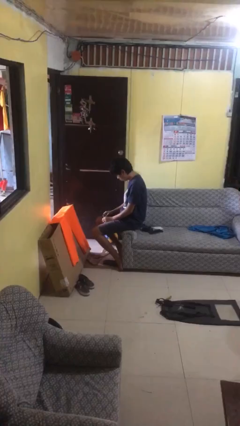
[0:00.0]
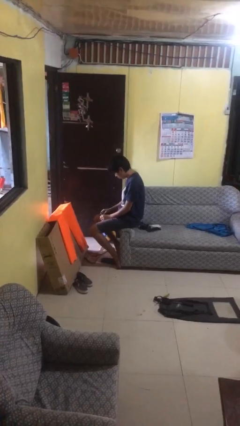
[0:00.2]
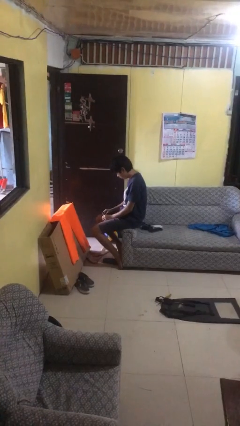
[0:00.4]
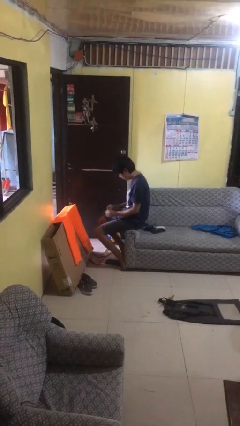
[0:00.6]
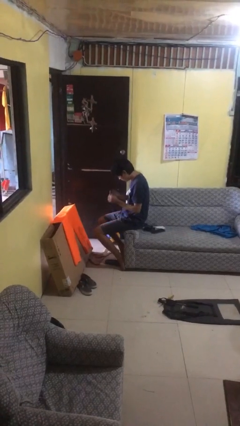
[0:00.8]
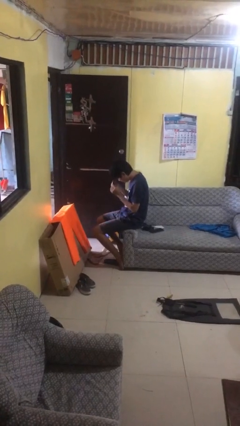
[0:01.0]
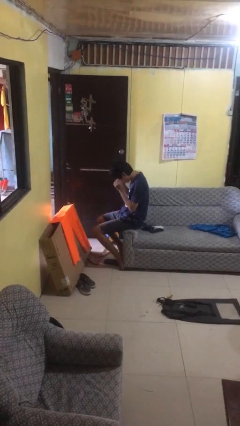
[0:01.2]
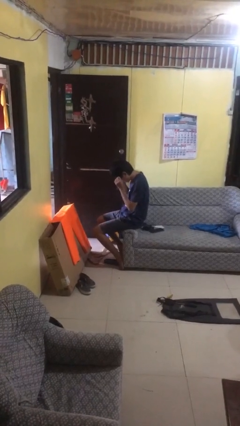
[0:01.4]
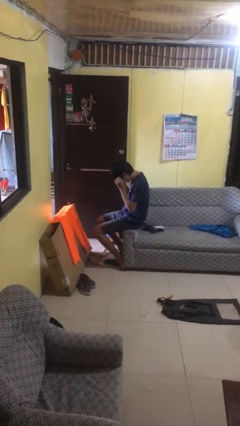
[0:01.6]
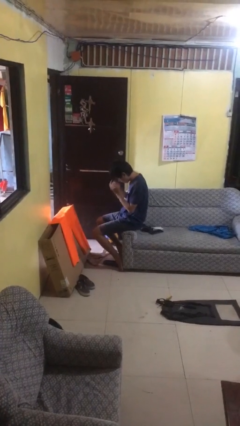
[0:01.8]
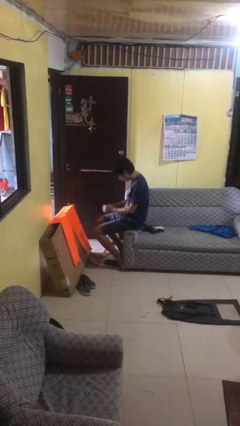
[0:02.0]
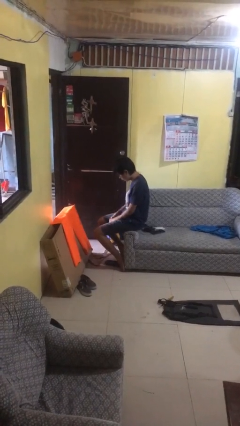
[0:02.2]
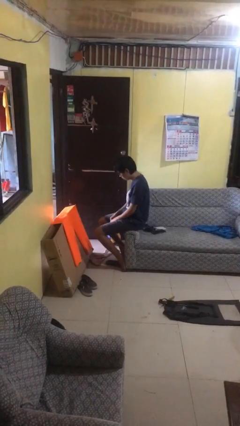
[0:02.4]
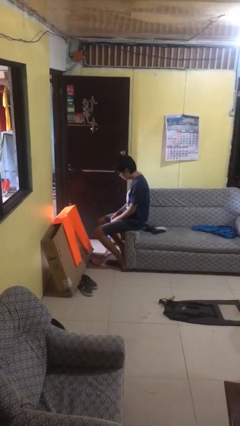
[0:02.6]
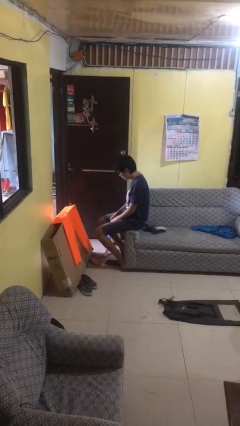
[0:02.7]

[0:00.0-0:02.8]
person puts on glasses

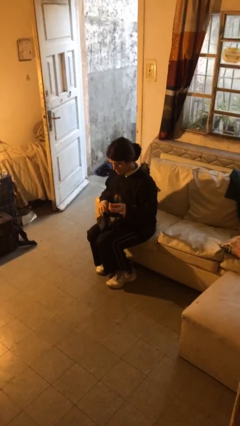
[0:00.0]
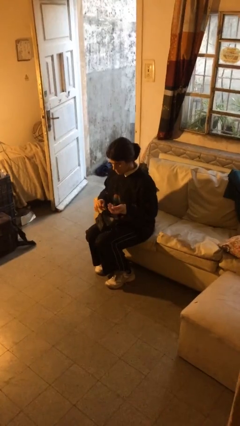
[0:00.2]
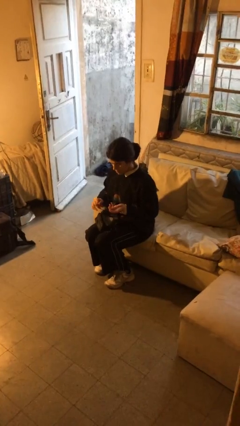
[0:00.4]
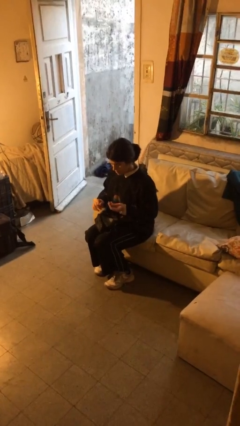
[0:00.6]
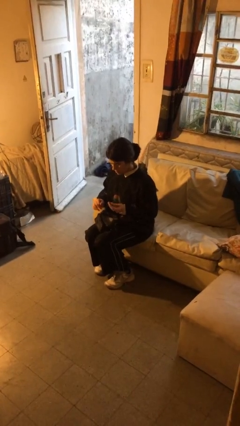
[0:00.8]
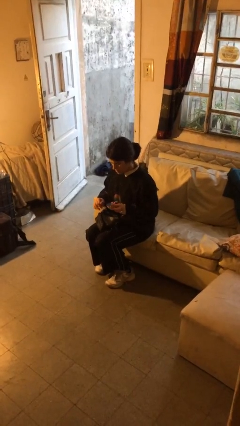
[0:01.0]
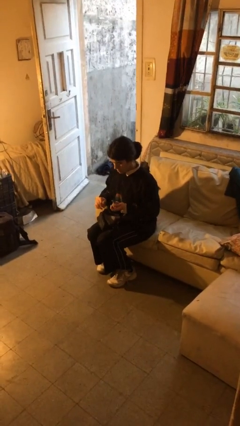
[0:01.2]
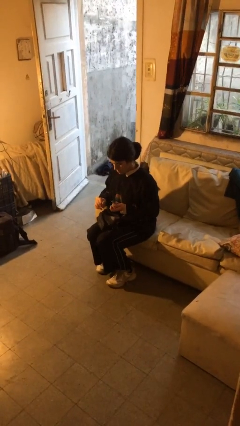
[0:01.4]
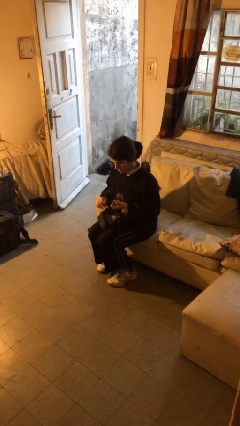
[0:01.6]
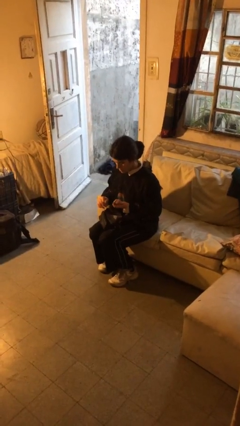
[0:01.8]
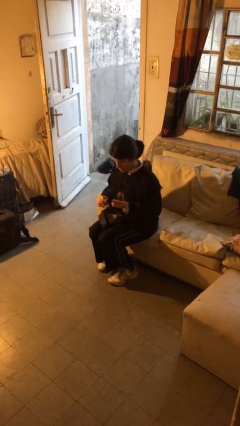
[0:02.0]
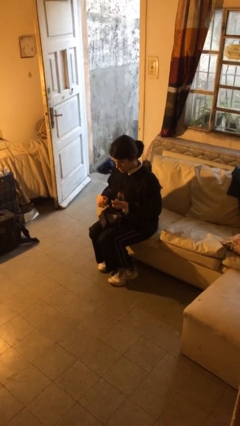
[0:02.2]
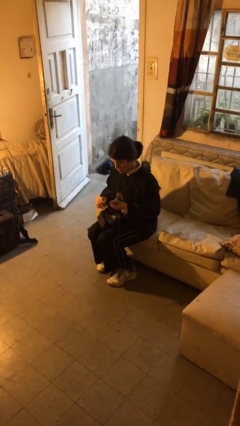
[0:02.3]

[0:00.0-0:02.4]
person takes object from purse

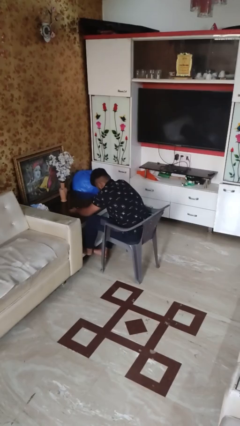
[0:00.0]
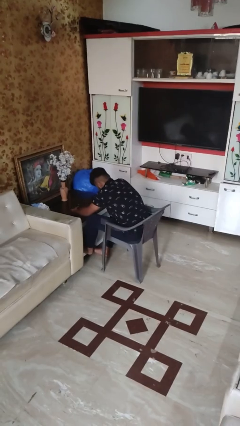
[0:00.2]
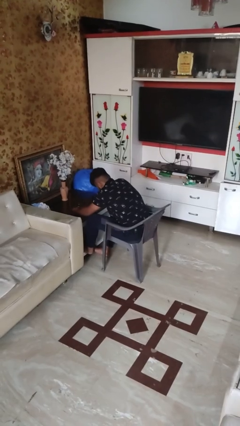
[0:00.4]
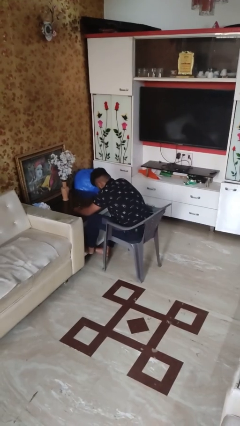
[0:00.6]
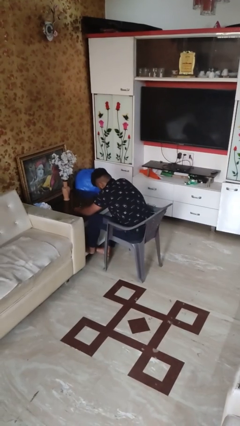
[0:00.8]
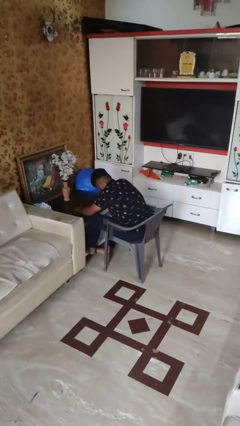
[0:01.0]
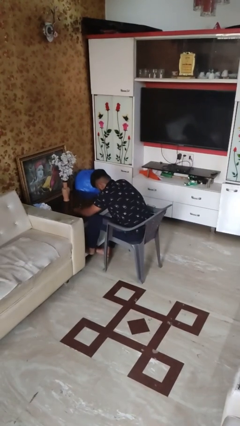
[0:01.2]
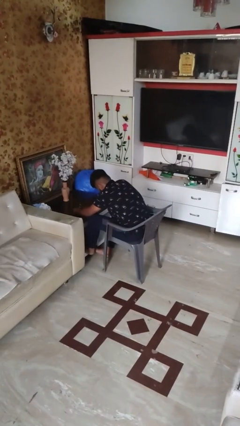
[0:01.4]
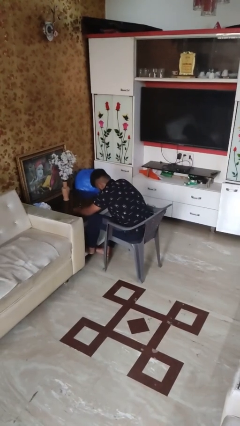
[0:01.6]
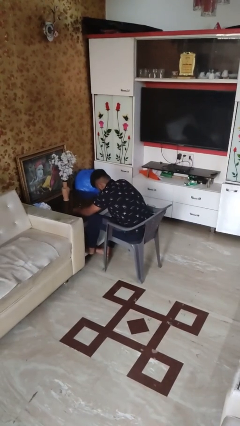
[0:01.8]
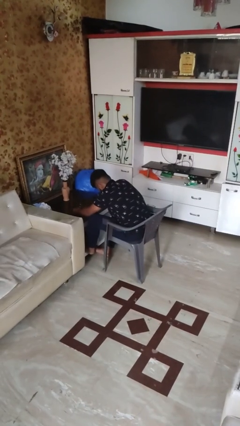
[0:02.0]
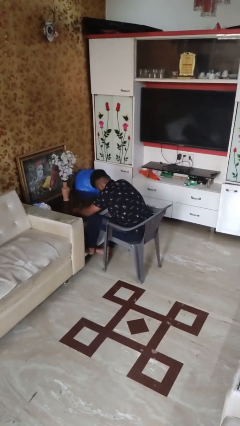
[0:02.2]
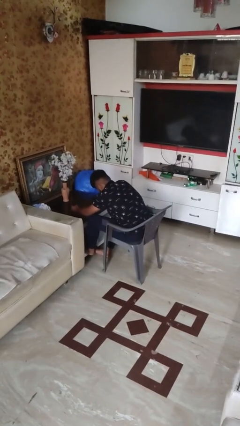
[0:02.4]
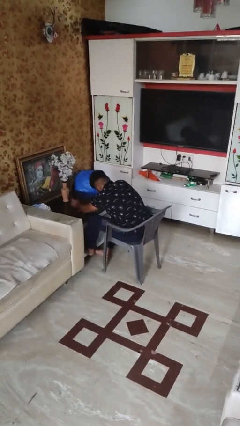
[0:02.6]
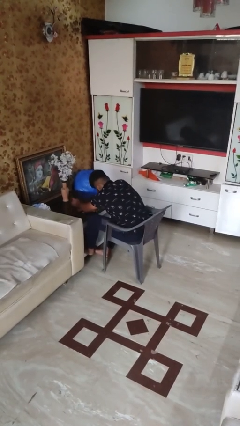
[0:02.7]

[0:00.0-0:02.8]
person paints fingernails

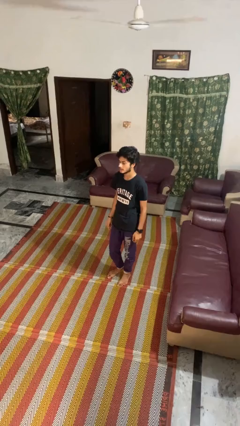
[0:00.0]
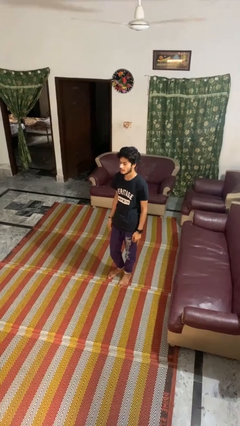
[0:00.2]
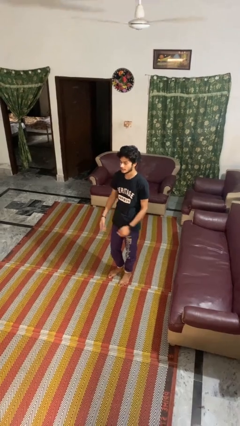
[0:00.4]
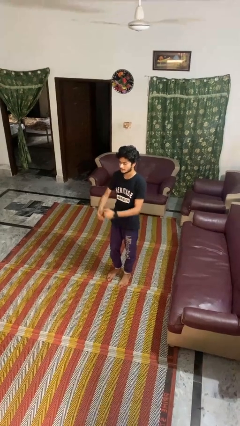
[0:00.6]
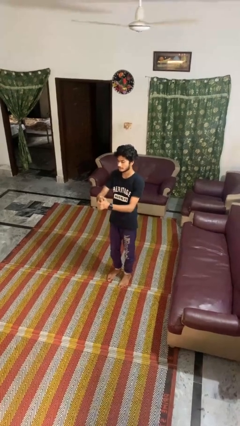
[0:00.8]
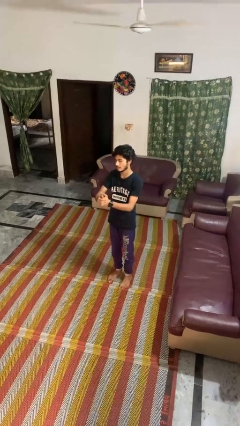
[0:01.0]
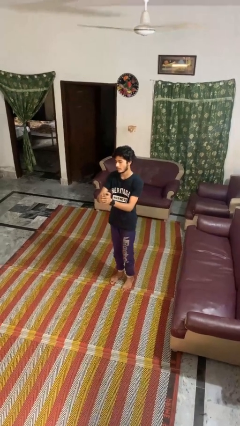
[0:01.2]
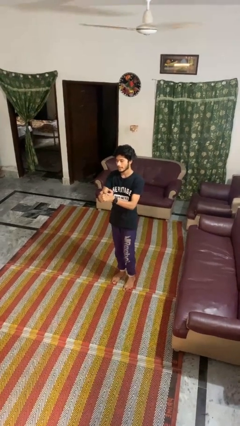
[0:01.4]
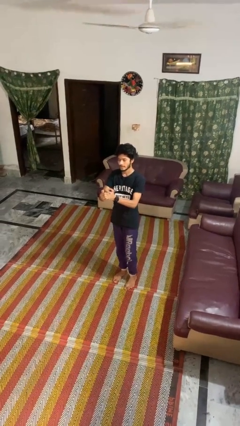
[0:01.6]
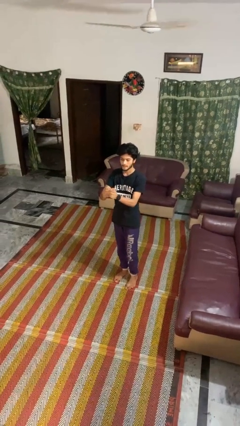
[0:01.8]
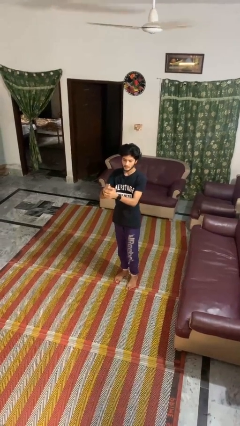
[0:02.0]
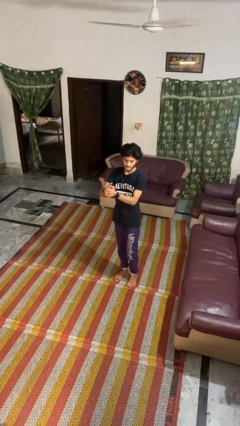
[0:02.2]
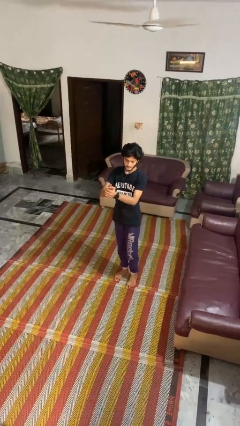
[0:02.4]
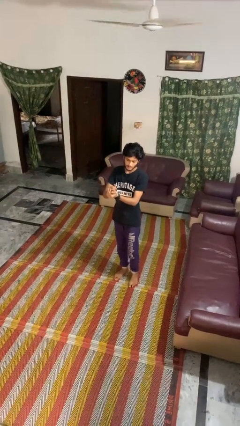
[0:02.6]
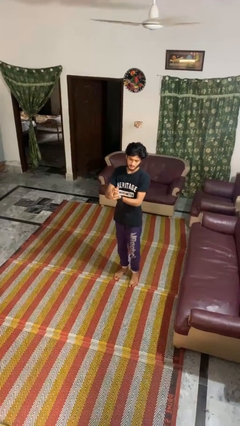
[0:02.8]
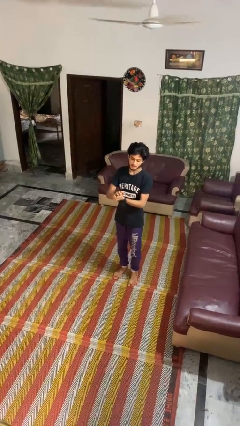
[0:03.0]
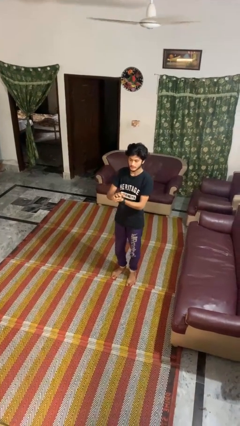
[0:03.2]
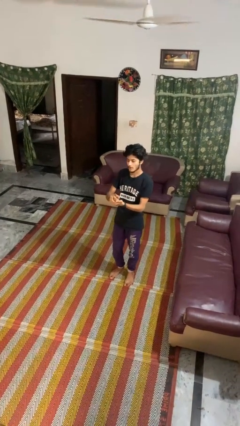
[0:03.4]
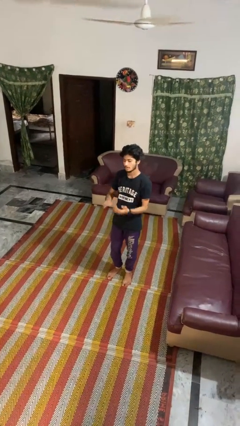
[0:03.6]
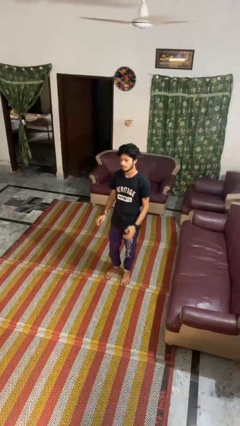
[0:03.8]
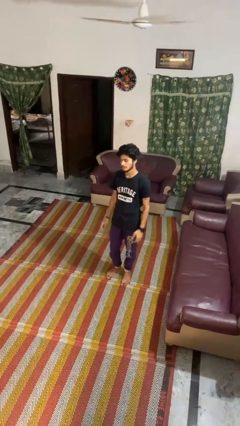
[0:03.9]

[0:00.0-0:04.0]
person cracks knuckles

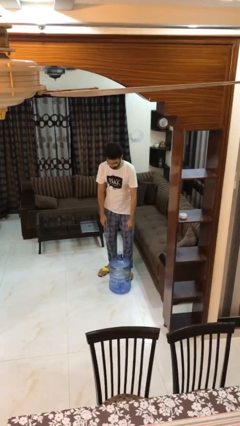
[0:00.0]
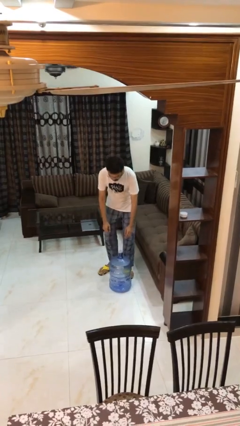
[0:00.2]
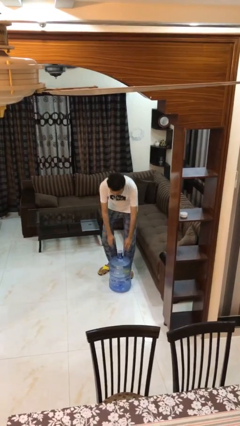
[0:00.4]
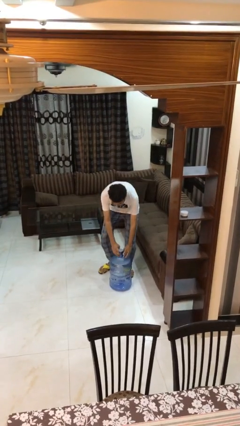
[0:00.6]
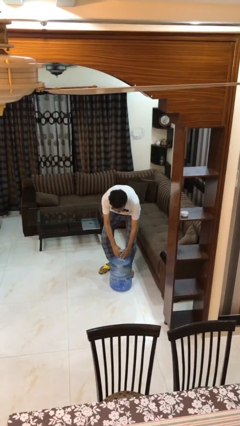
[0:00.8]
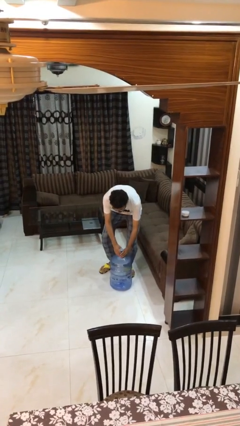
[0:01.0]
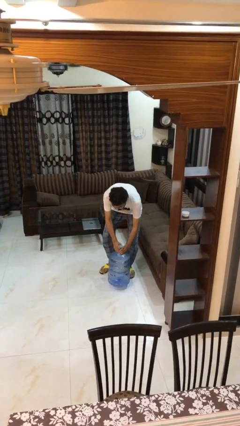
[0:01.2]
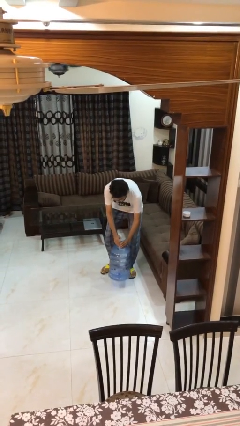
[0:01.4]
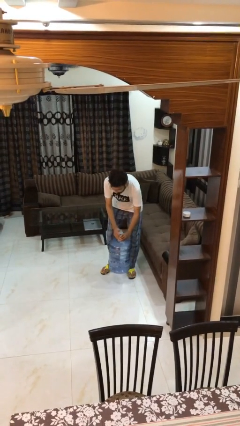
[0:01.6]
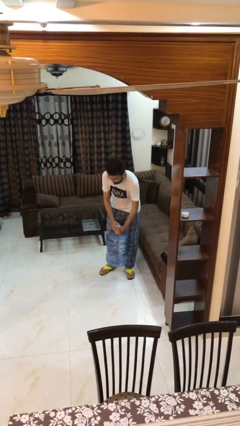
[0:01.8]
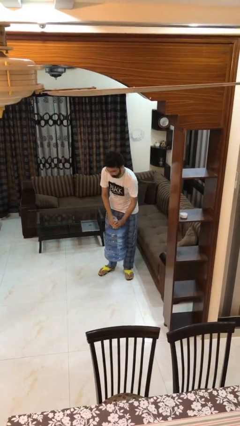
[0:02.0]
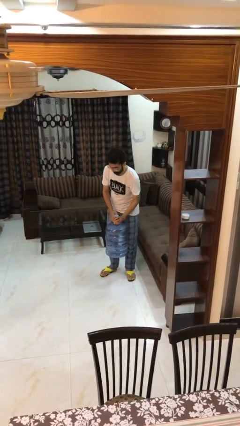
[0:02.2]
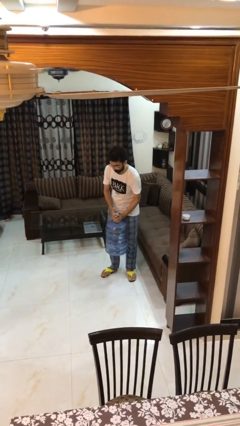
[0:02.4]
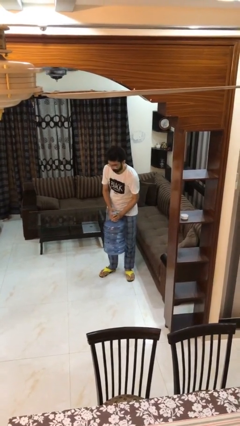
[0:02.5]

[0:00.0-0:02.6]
person picks up object from floor

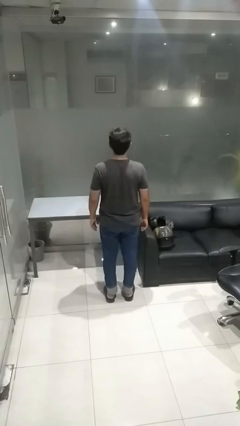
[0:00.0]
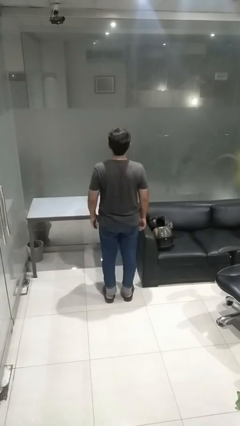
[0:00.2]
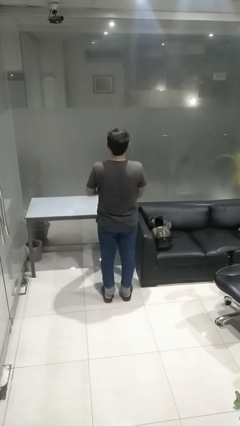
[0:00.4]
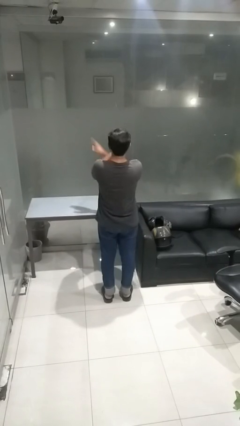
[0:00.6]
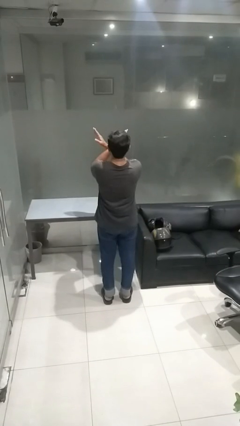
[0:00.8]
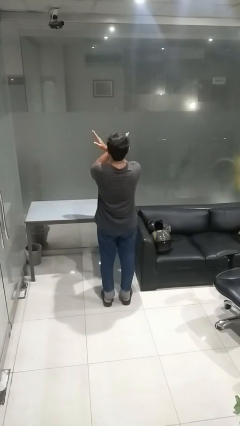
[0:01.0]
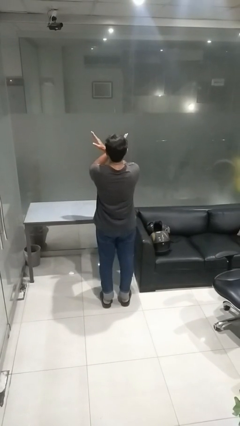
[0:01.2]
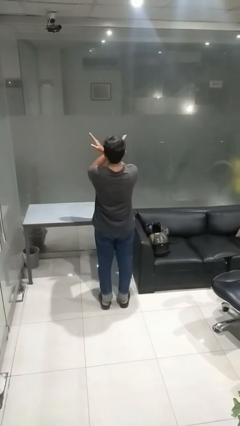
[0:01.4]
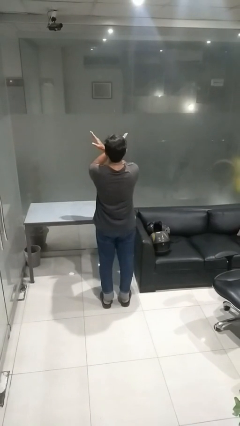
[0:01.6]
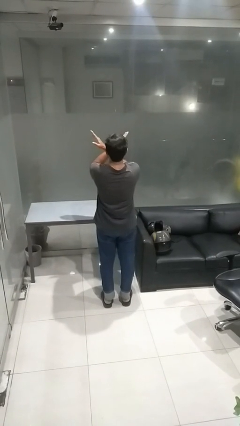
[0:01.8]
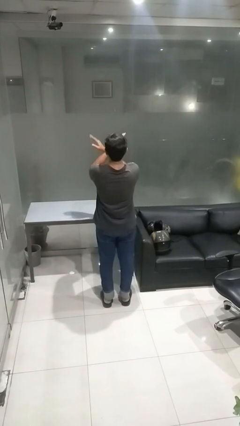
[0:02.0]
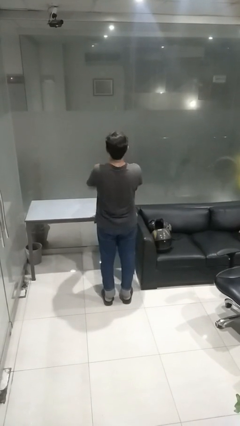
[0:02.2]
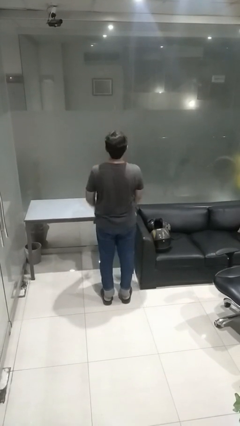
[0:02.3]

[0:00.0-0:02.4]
person gestures arms x

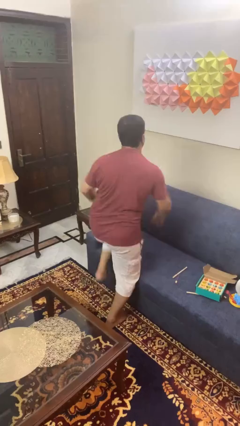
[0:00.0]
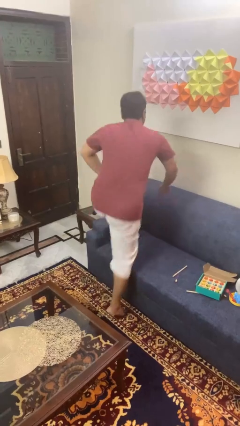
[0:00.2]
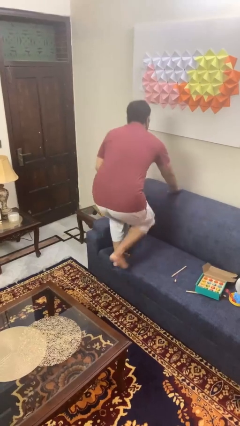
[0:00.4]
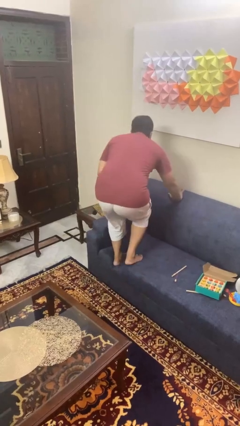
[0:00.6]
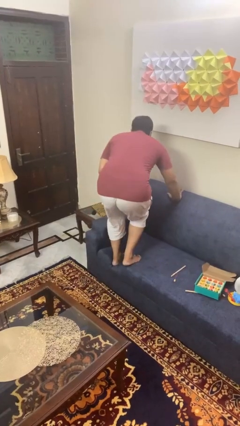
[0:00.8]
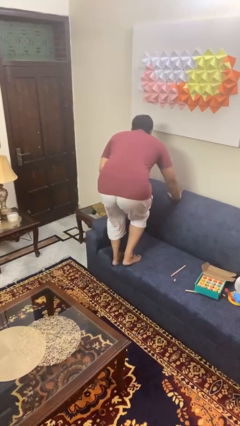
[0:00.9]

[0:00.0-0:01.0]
person jumps on couch
